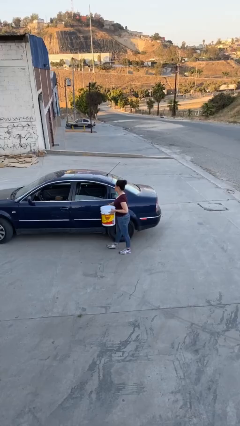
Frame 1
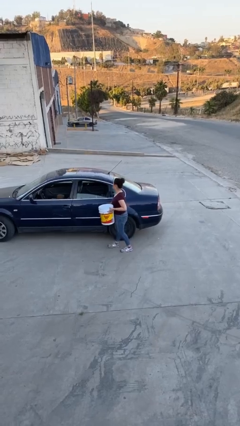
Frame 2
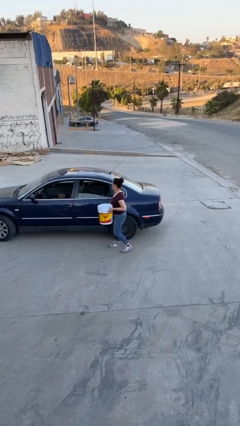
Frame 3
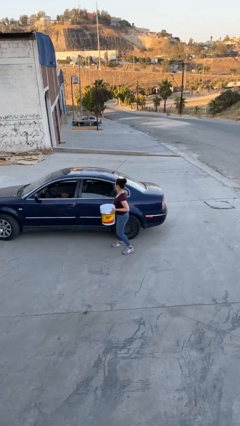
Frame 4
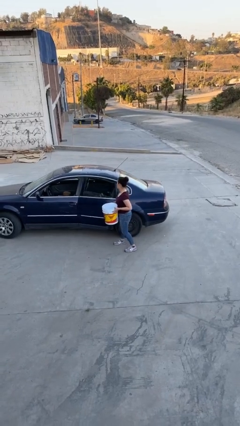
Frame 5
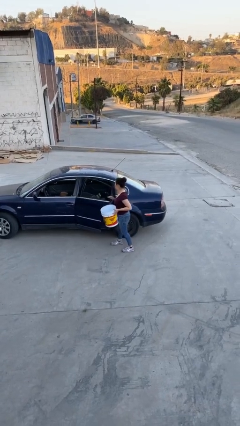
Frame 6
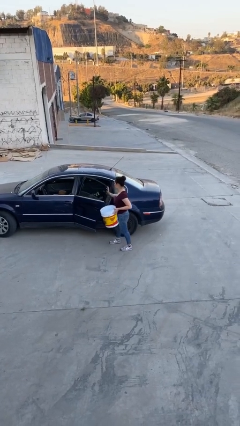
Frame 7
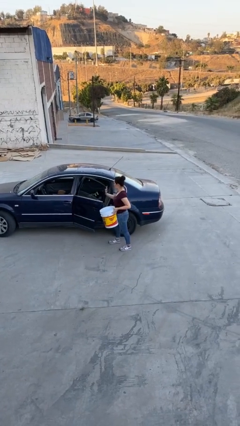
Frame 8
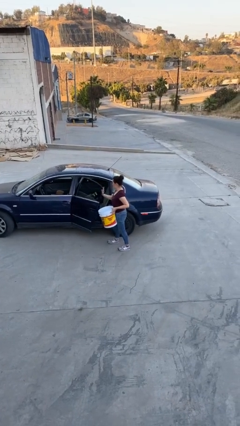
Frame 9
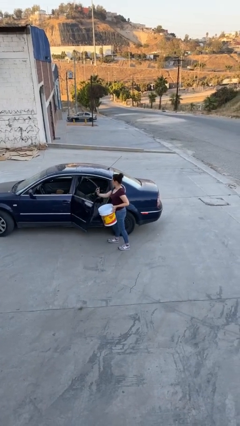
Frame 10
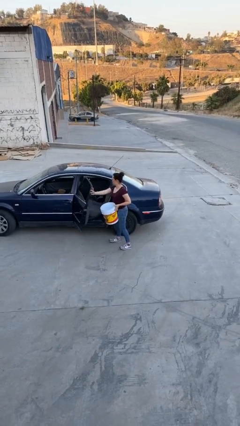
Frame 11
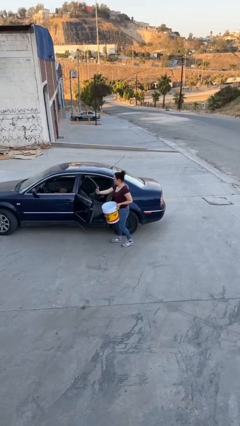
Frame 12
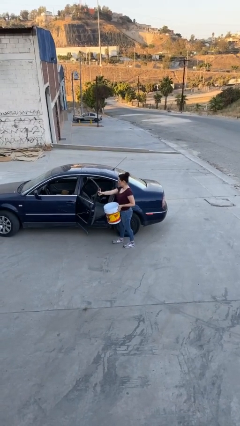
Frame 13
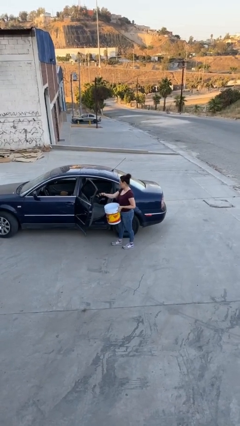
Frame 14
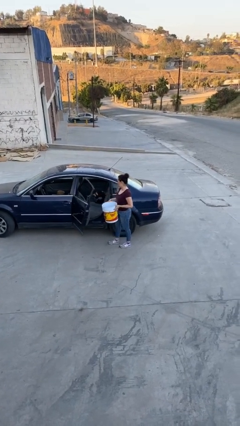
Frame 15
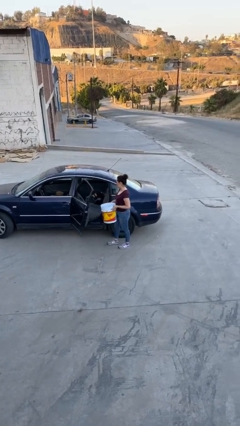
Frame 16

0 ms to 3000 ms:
person opens car door

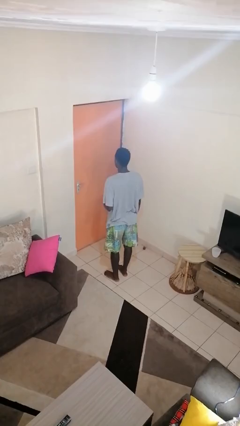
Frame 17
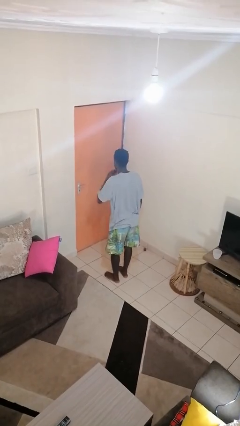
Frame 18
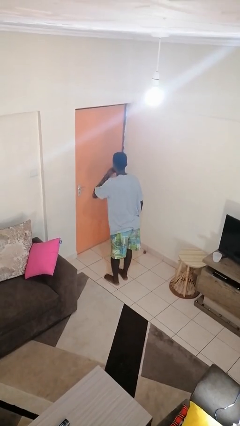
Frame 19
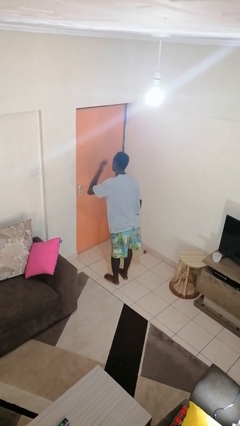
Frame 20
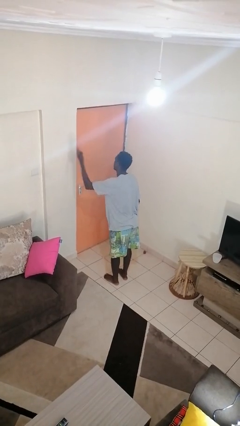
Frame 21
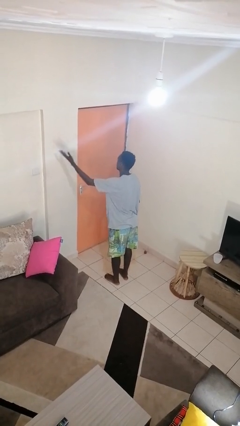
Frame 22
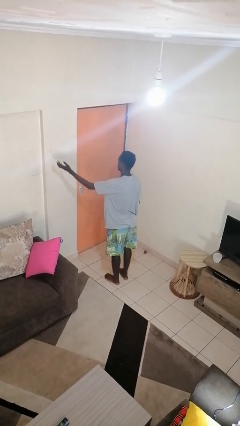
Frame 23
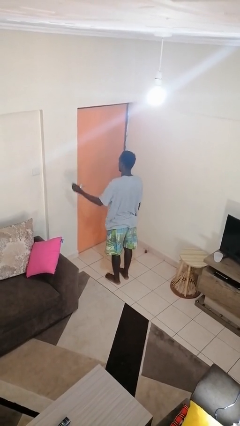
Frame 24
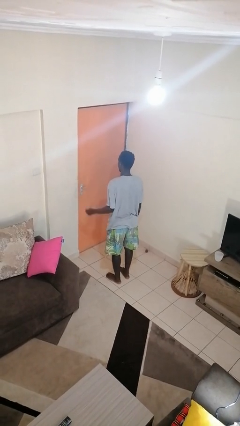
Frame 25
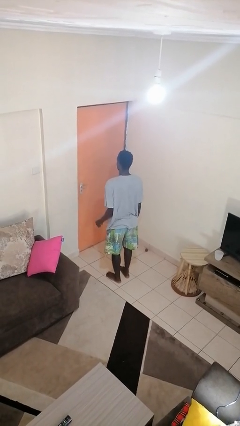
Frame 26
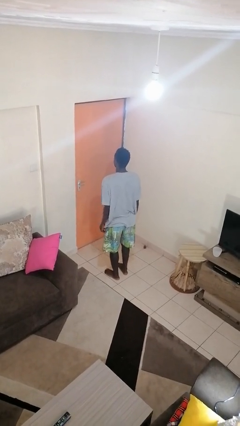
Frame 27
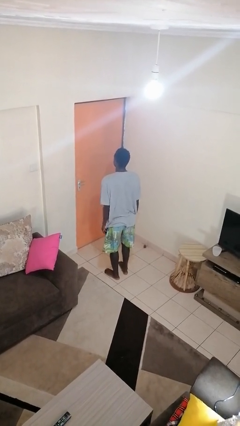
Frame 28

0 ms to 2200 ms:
person gestures blow kiss

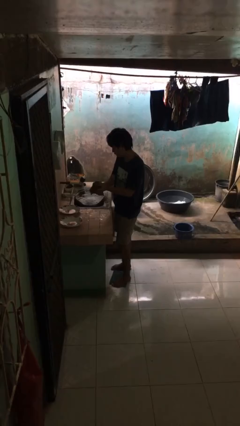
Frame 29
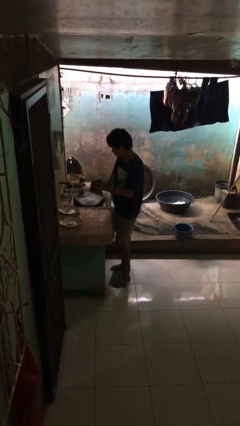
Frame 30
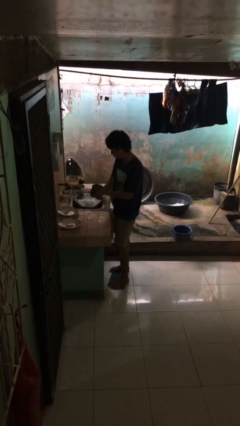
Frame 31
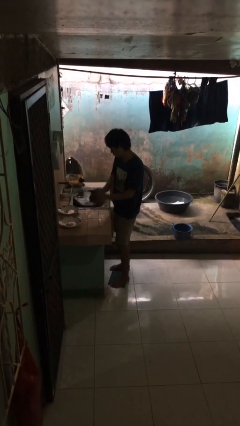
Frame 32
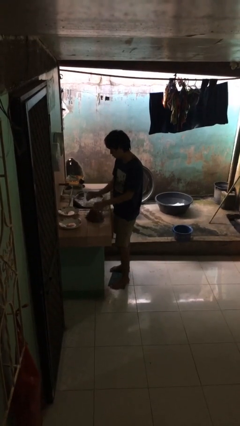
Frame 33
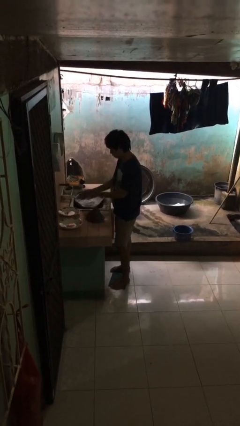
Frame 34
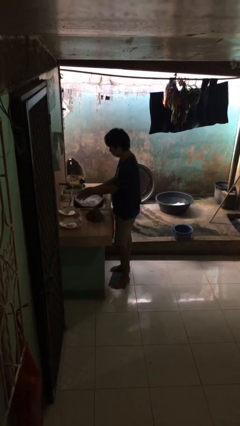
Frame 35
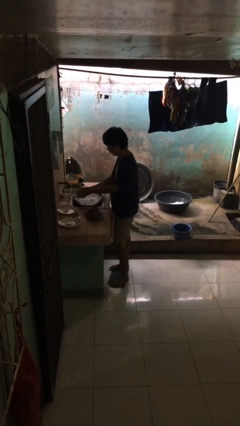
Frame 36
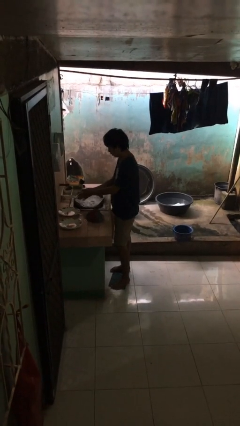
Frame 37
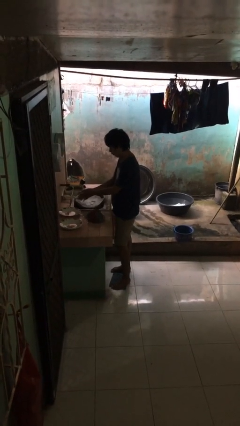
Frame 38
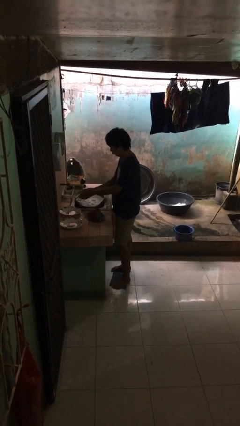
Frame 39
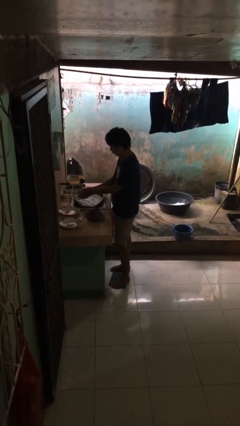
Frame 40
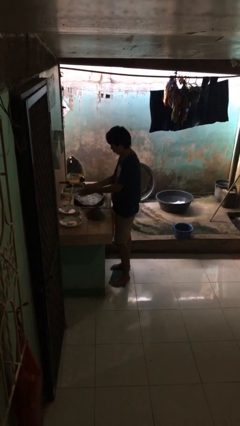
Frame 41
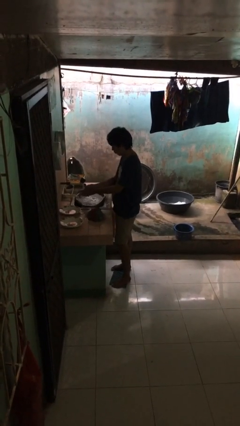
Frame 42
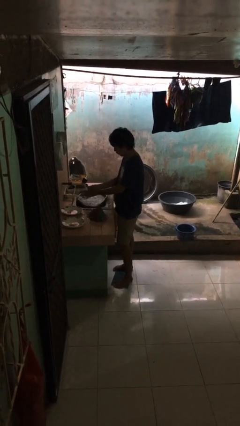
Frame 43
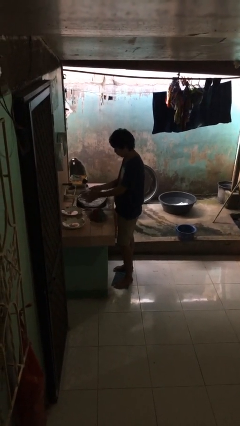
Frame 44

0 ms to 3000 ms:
person washes hands

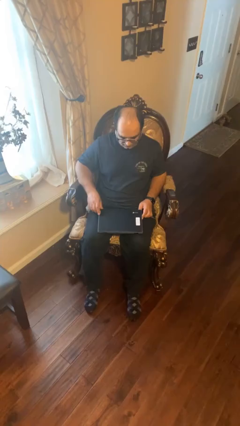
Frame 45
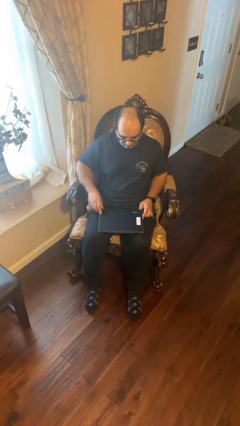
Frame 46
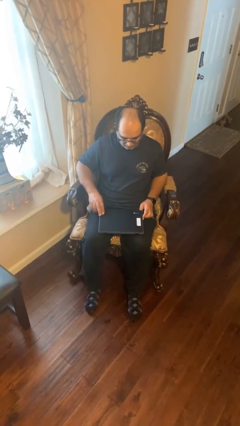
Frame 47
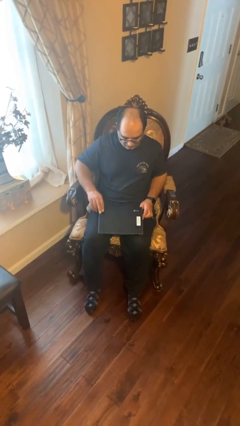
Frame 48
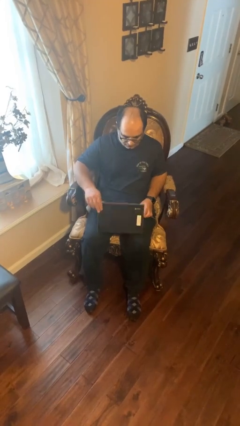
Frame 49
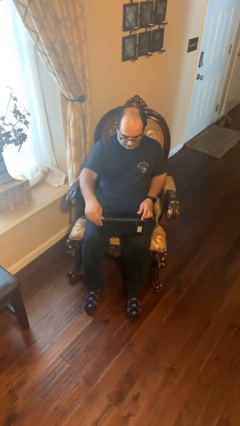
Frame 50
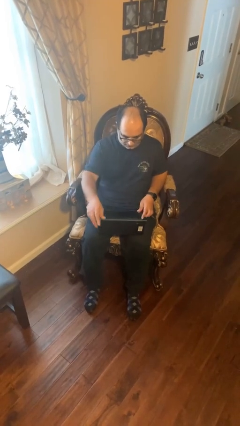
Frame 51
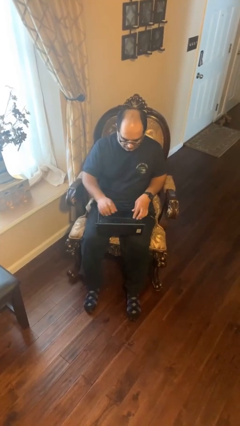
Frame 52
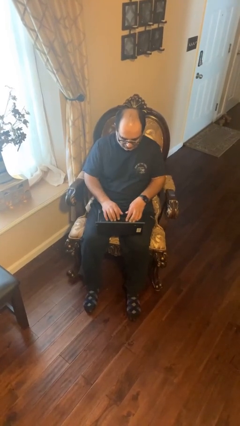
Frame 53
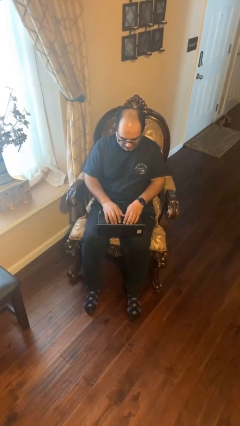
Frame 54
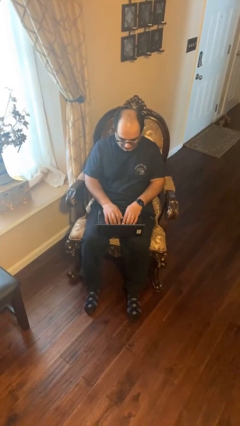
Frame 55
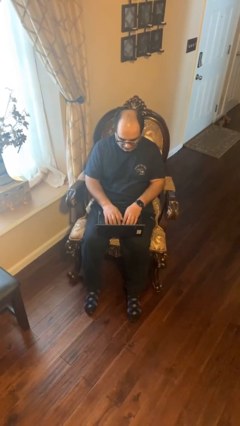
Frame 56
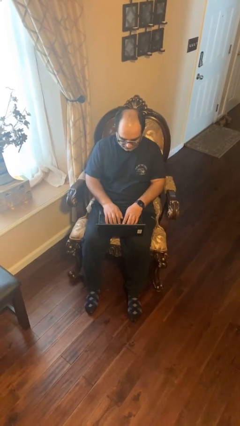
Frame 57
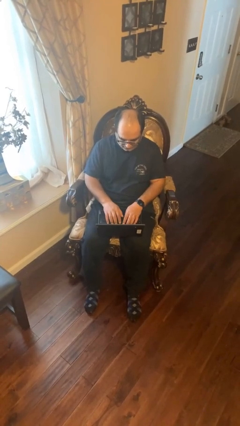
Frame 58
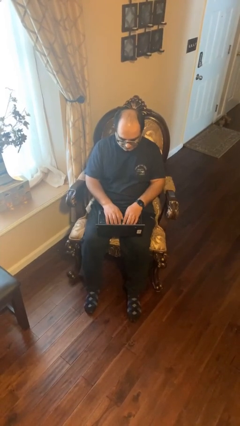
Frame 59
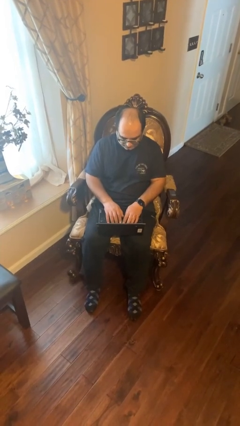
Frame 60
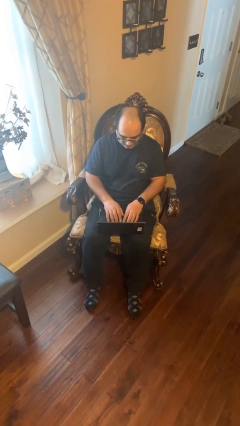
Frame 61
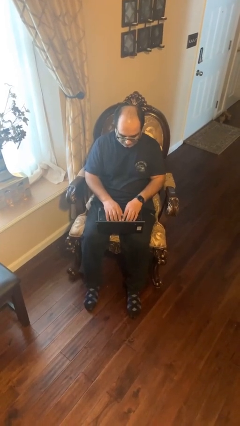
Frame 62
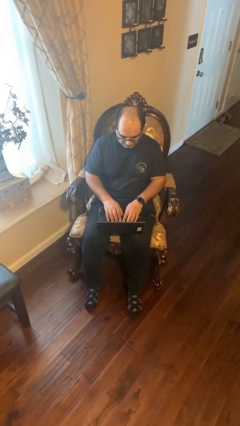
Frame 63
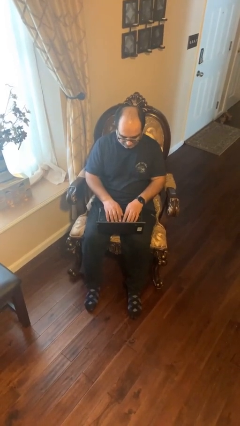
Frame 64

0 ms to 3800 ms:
person interacts with laptop

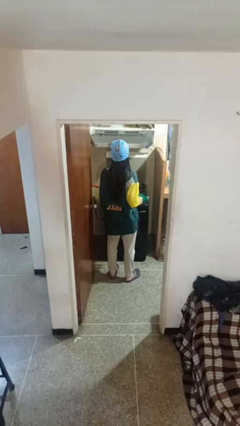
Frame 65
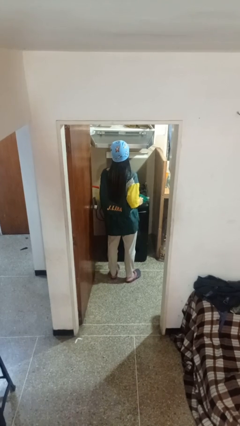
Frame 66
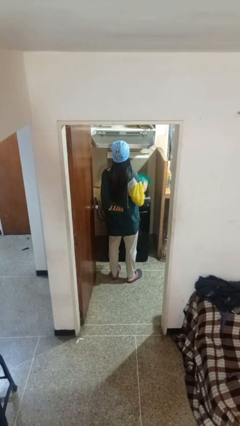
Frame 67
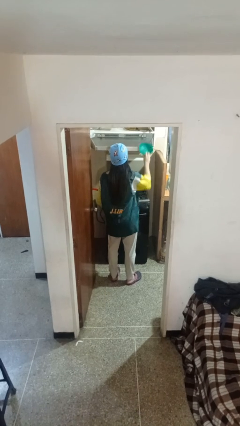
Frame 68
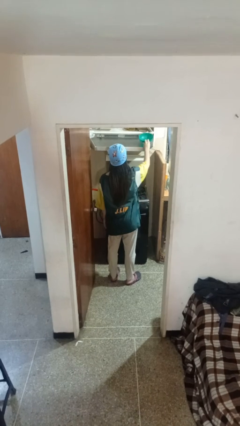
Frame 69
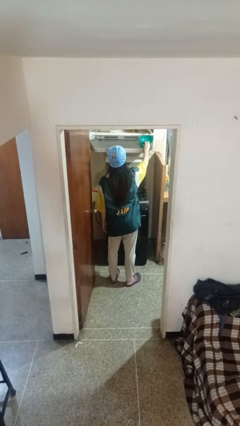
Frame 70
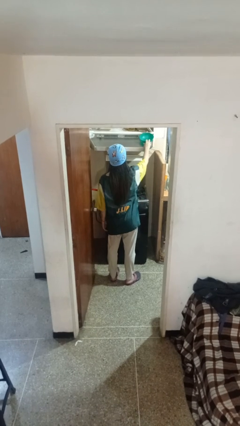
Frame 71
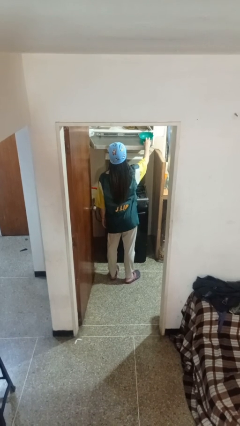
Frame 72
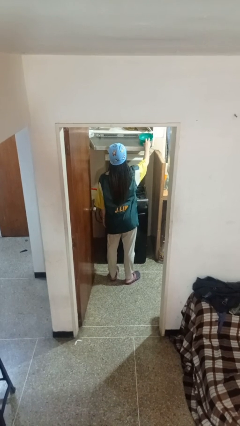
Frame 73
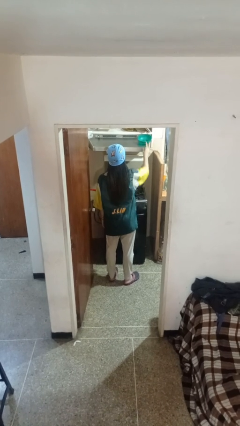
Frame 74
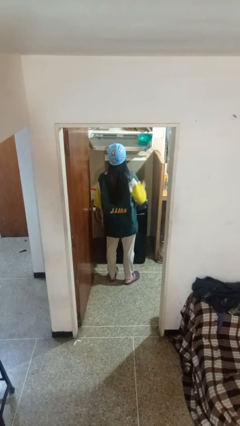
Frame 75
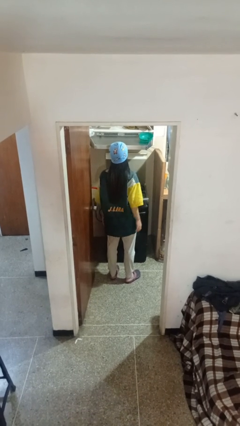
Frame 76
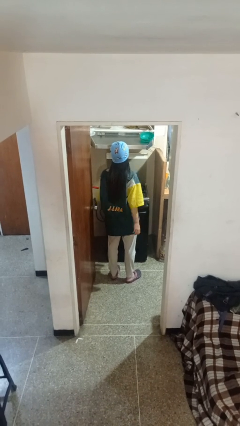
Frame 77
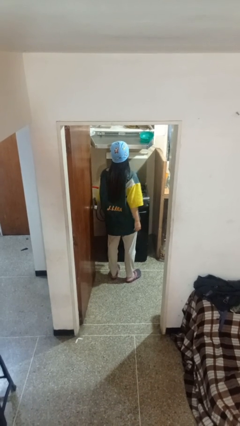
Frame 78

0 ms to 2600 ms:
person puts down object on countertop

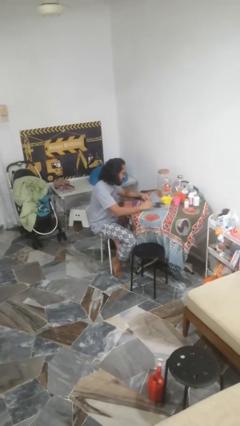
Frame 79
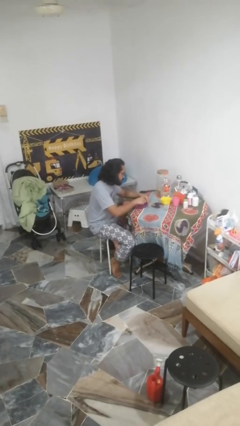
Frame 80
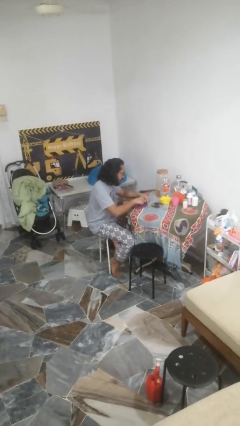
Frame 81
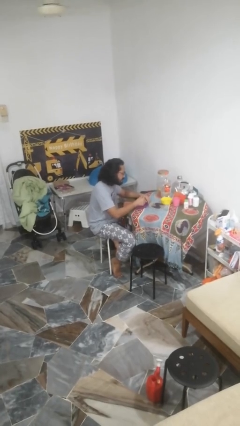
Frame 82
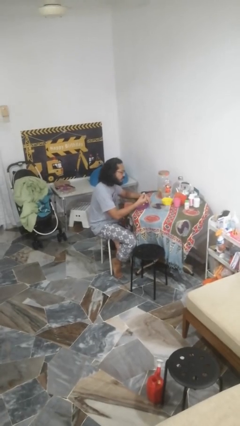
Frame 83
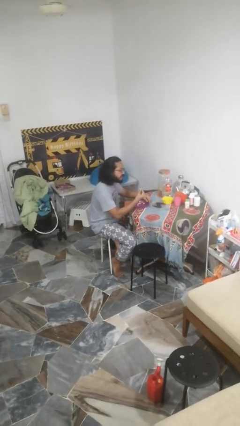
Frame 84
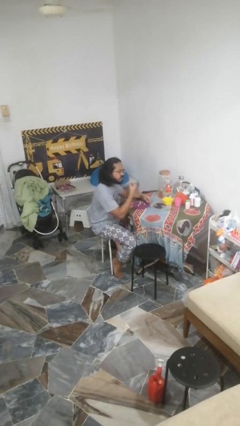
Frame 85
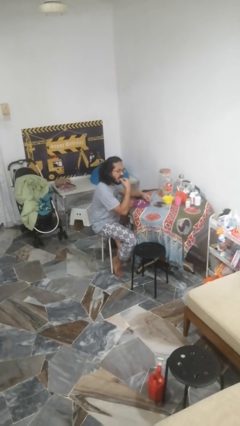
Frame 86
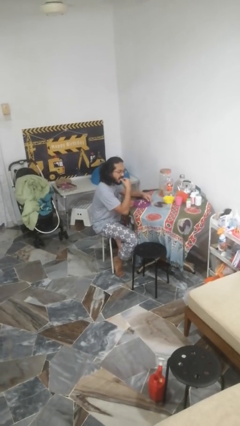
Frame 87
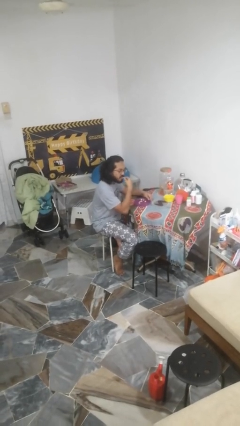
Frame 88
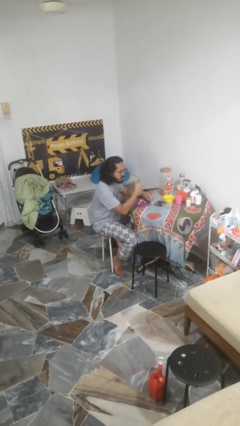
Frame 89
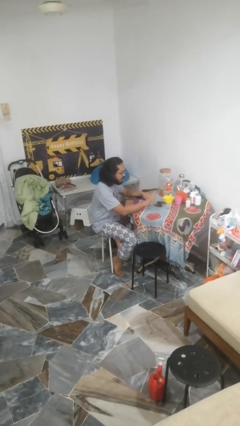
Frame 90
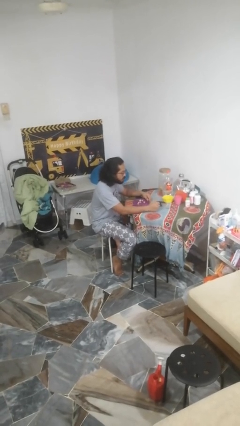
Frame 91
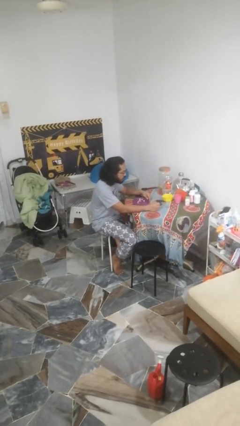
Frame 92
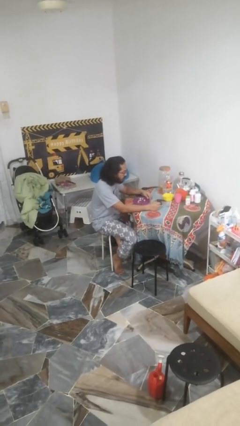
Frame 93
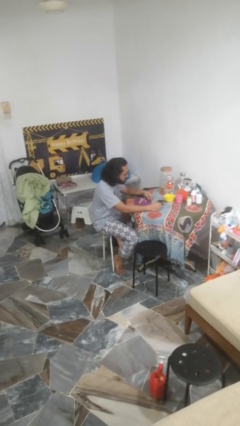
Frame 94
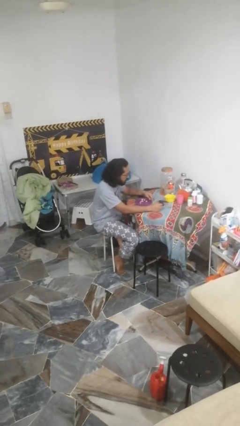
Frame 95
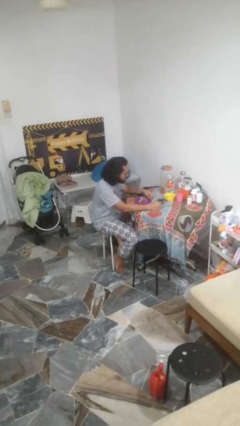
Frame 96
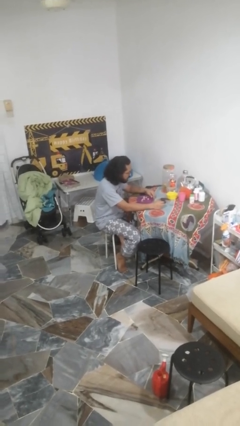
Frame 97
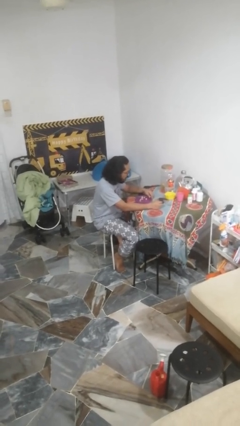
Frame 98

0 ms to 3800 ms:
person eats with hands
